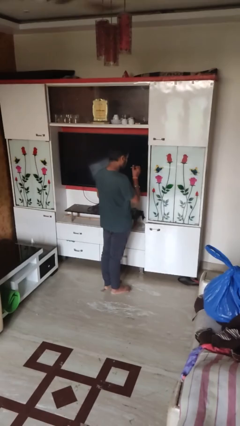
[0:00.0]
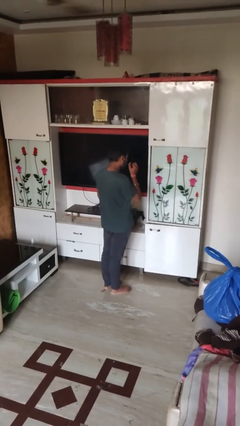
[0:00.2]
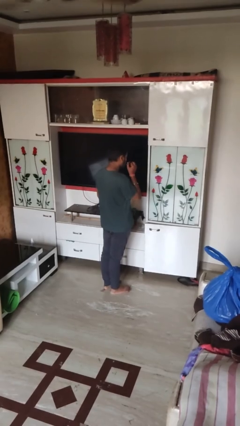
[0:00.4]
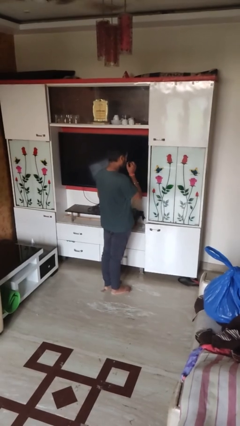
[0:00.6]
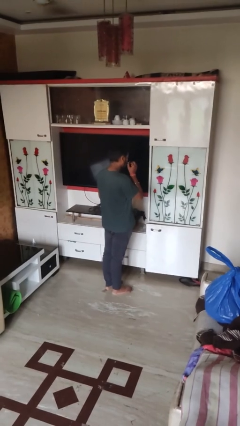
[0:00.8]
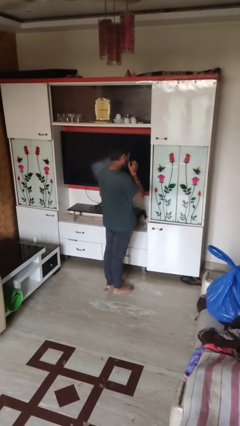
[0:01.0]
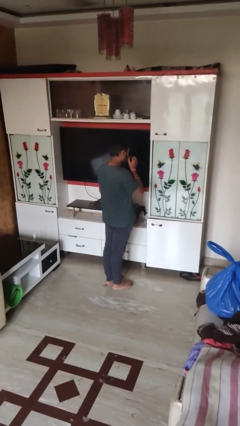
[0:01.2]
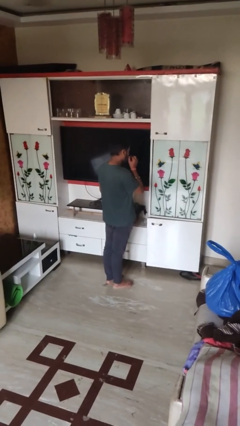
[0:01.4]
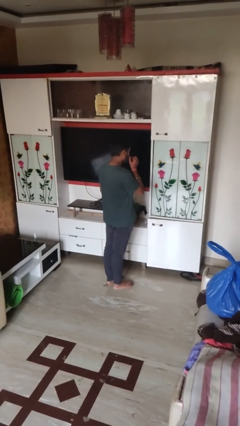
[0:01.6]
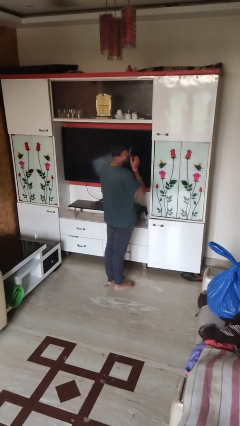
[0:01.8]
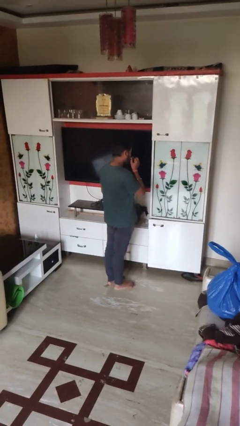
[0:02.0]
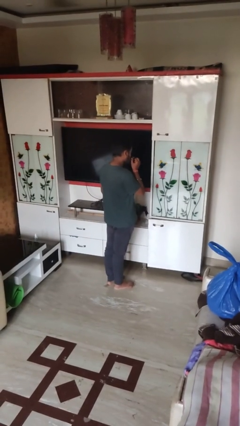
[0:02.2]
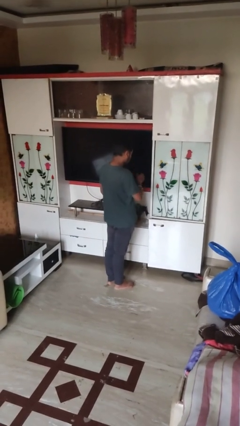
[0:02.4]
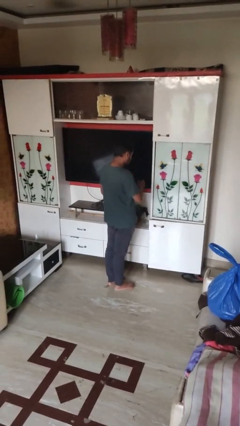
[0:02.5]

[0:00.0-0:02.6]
person applies lip makeup

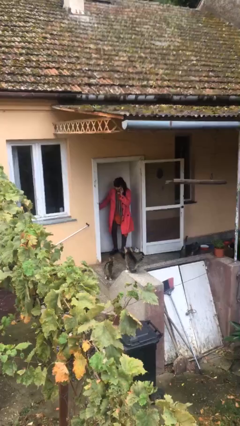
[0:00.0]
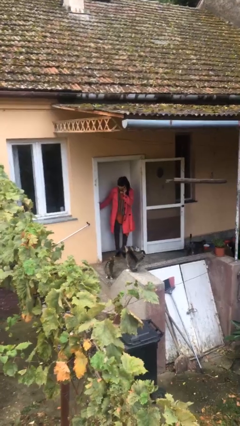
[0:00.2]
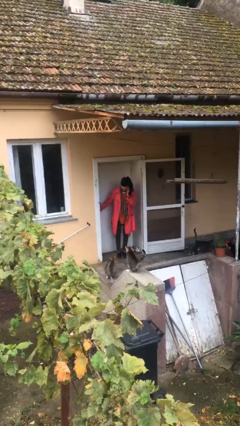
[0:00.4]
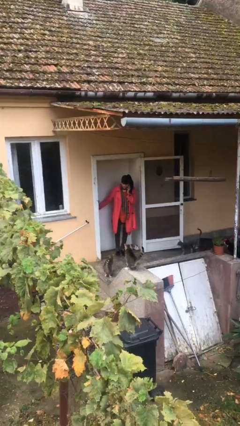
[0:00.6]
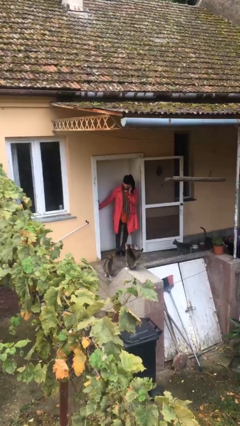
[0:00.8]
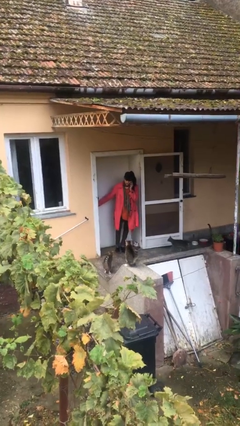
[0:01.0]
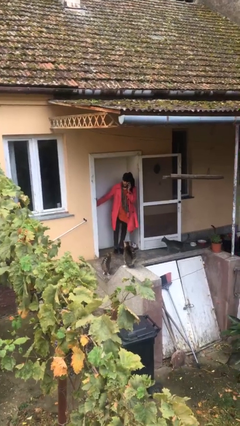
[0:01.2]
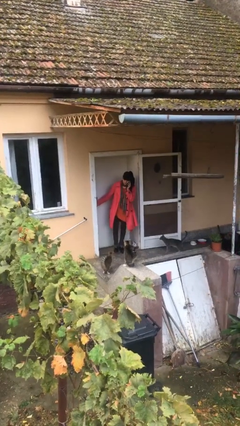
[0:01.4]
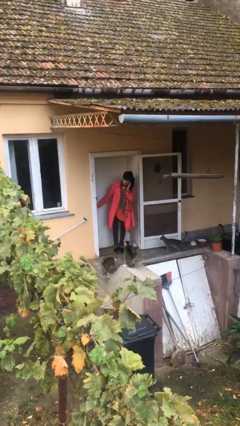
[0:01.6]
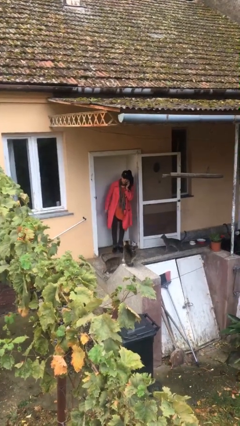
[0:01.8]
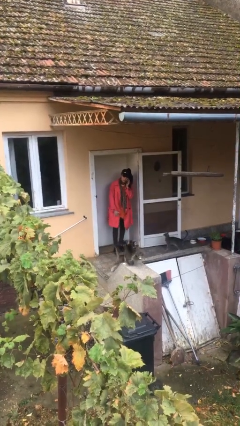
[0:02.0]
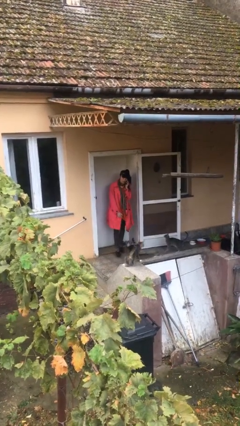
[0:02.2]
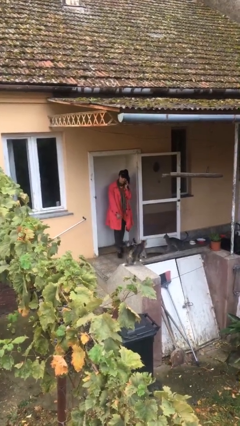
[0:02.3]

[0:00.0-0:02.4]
person closes facility door

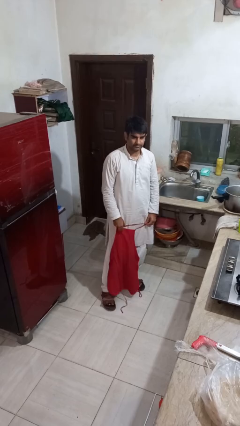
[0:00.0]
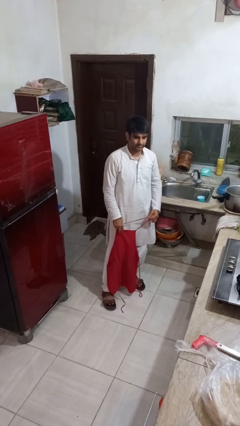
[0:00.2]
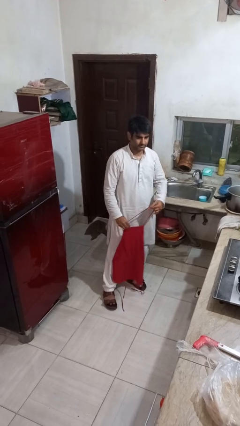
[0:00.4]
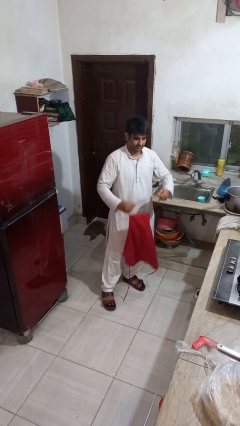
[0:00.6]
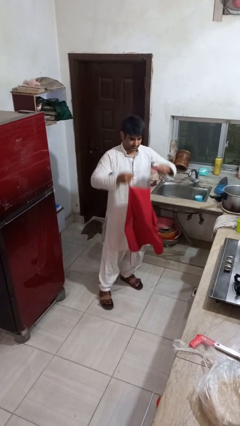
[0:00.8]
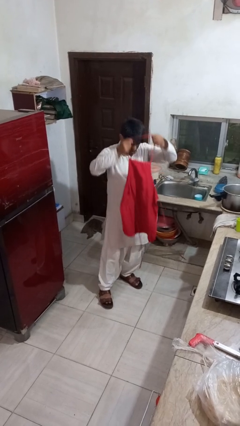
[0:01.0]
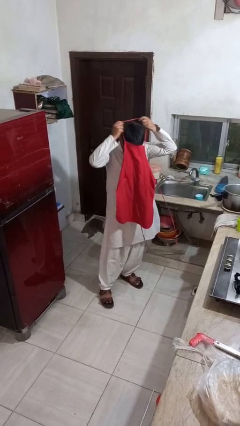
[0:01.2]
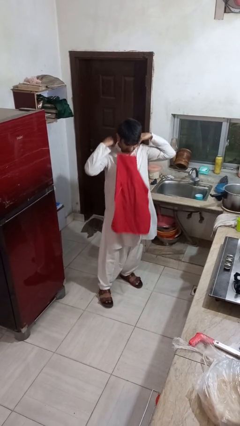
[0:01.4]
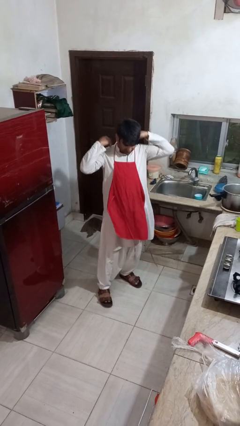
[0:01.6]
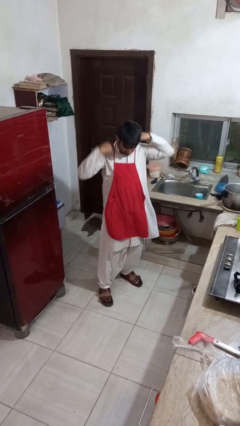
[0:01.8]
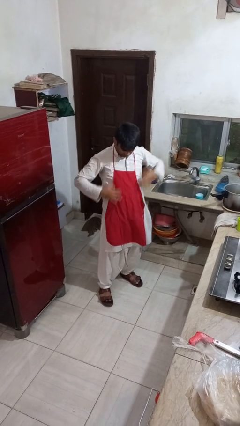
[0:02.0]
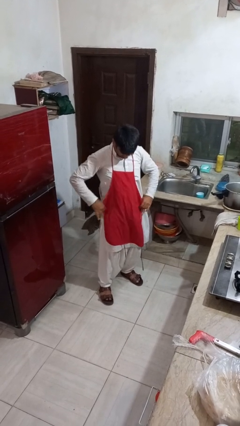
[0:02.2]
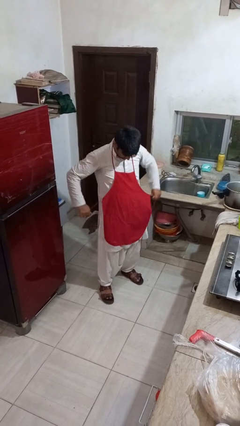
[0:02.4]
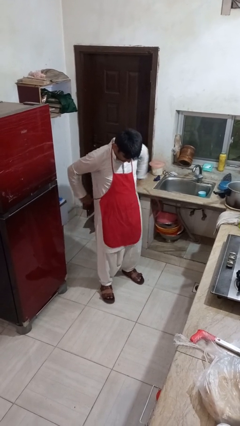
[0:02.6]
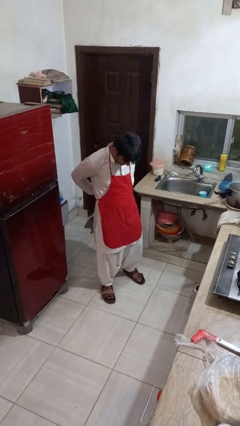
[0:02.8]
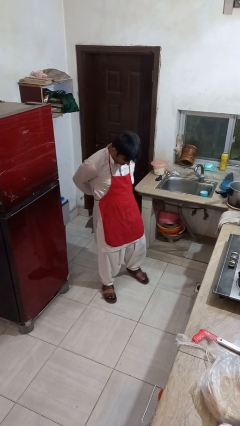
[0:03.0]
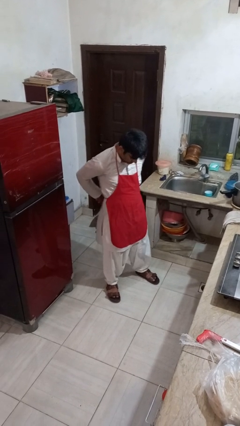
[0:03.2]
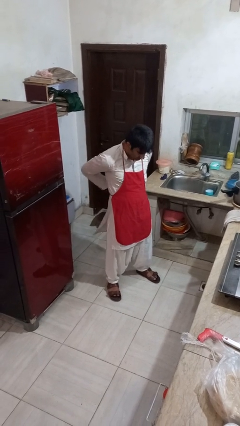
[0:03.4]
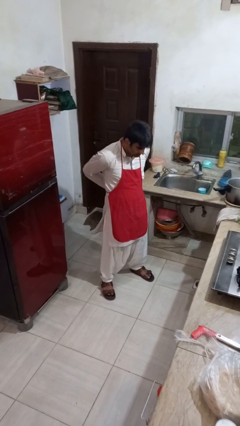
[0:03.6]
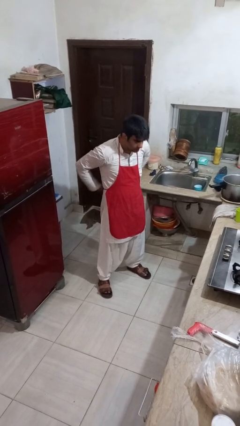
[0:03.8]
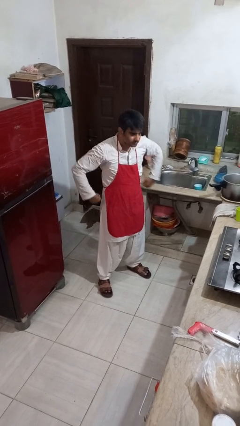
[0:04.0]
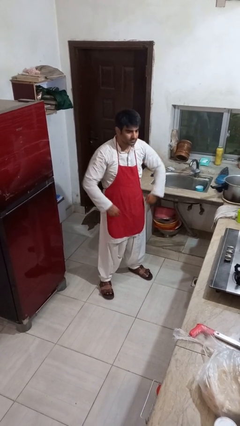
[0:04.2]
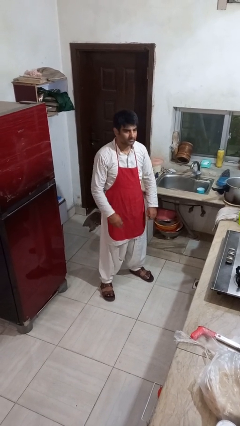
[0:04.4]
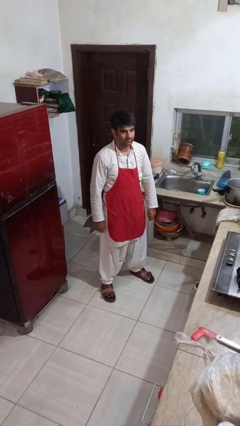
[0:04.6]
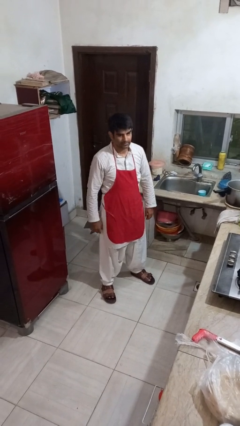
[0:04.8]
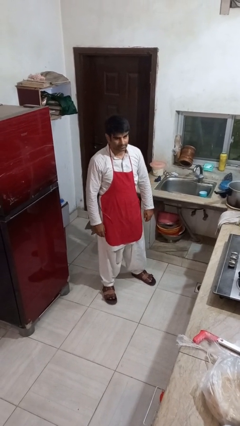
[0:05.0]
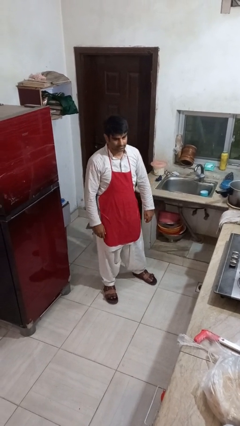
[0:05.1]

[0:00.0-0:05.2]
person puts on apron

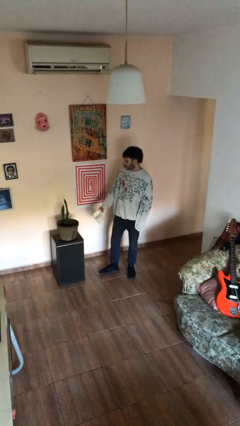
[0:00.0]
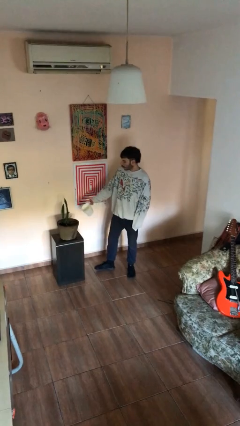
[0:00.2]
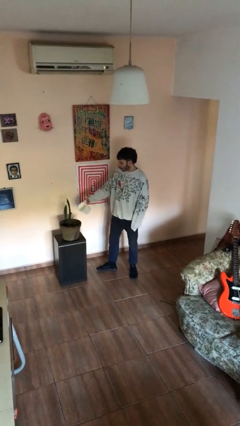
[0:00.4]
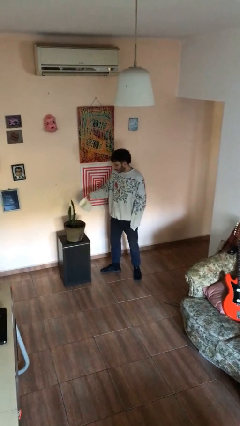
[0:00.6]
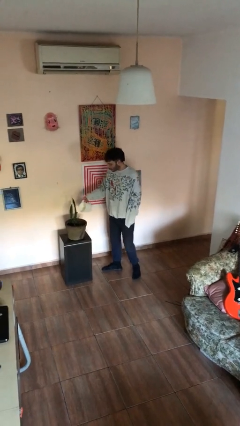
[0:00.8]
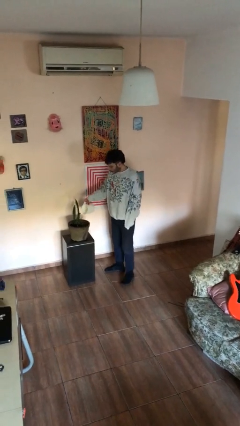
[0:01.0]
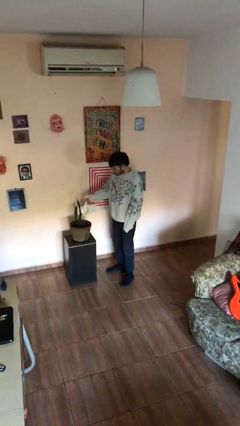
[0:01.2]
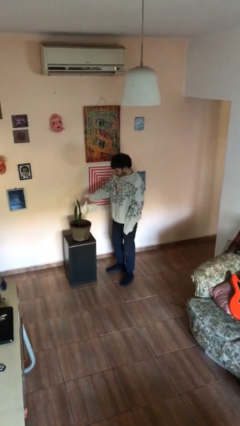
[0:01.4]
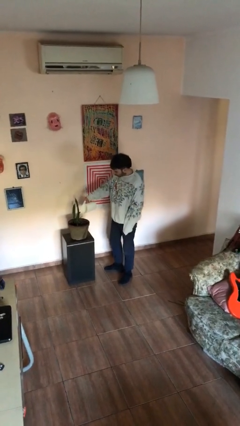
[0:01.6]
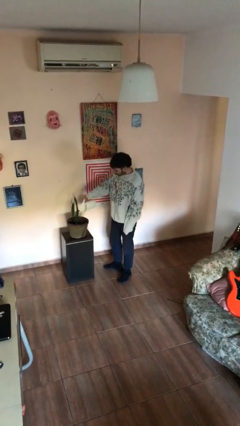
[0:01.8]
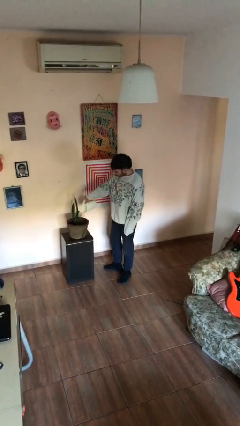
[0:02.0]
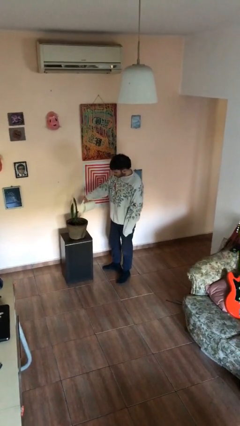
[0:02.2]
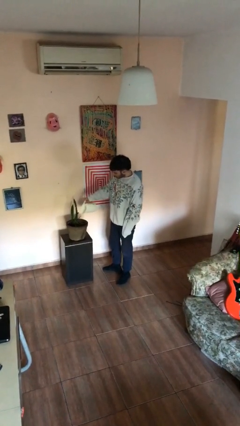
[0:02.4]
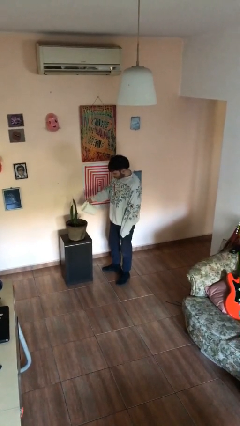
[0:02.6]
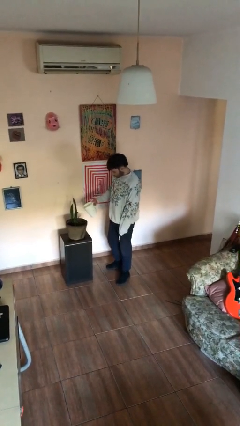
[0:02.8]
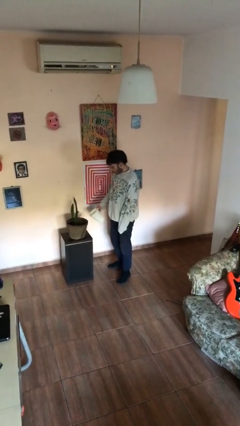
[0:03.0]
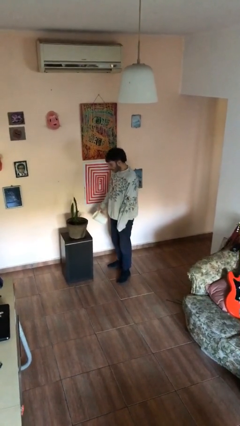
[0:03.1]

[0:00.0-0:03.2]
person waters houseplant

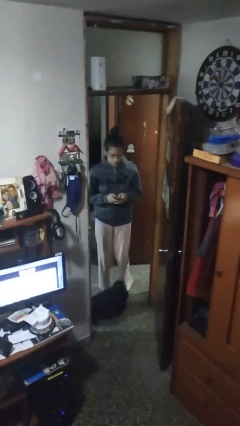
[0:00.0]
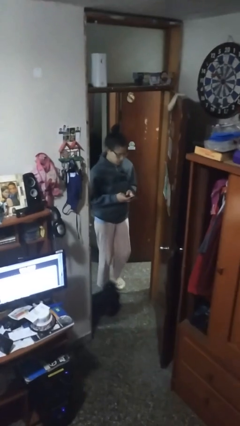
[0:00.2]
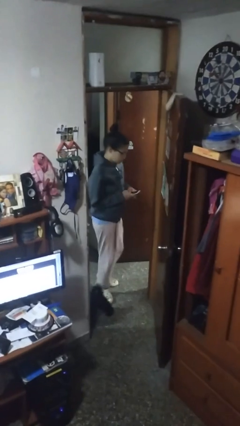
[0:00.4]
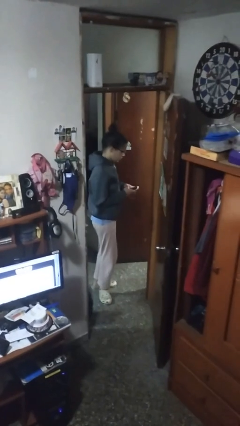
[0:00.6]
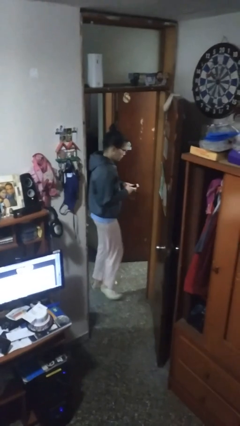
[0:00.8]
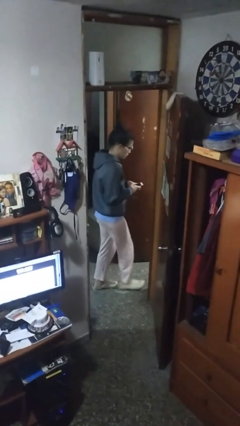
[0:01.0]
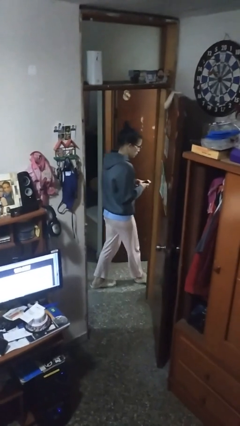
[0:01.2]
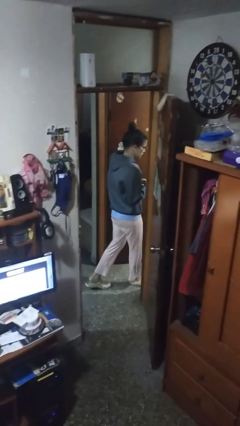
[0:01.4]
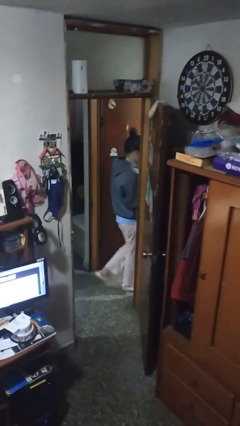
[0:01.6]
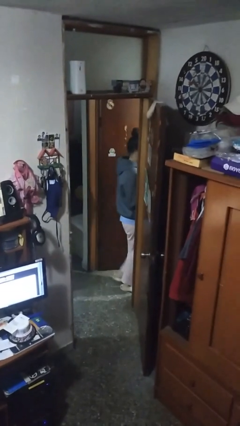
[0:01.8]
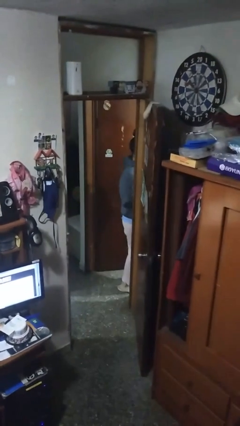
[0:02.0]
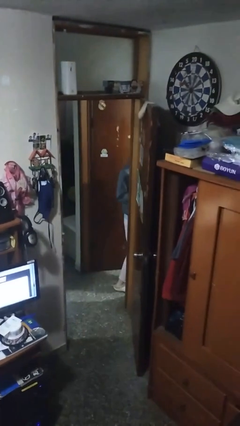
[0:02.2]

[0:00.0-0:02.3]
person exits scene through structure

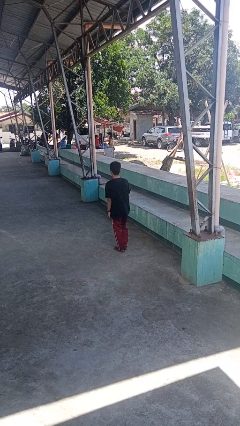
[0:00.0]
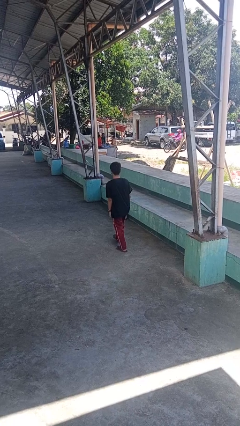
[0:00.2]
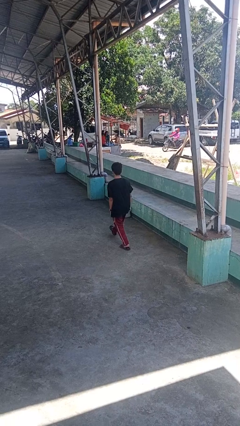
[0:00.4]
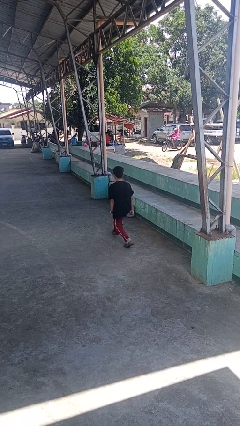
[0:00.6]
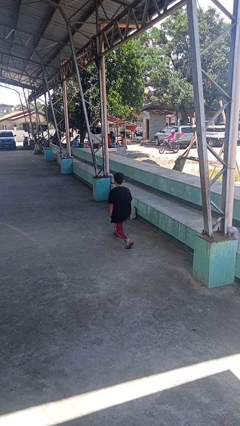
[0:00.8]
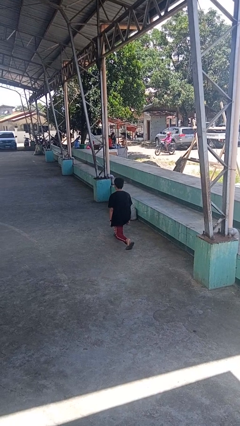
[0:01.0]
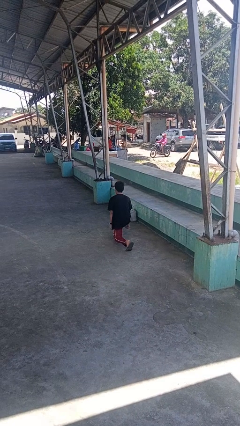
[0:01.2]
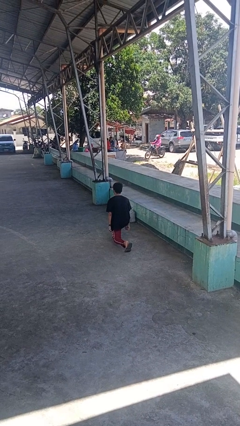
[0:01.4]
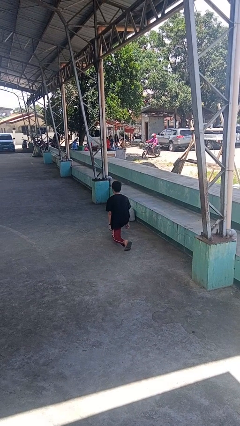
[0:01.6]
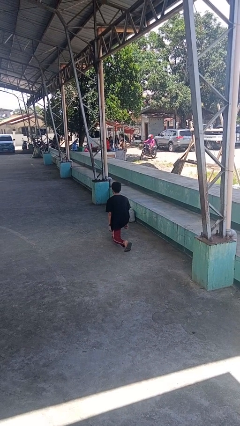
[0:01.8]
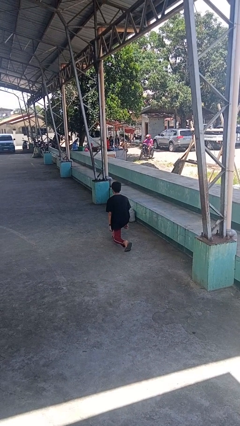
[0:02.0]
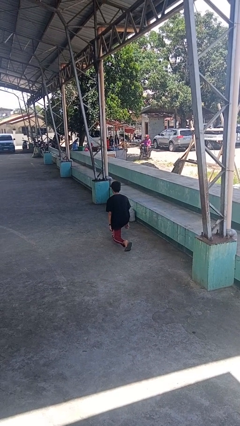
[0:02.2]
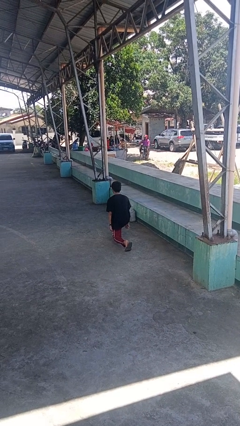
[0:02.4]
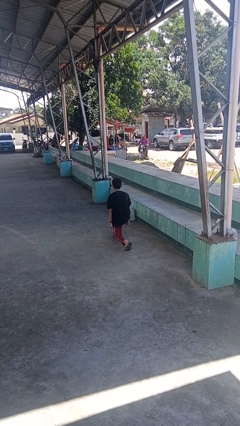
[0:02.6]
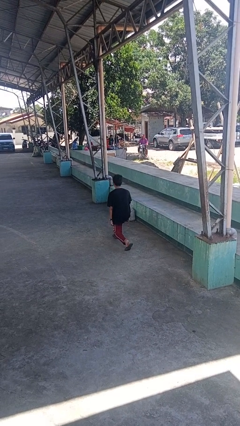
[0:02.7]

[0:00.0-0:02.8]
person exercises with lunges
